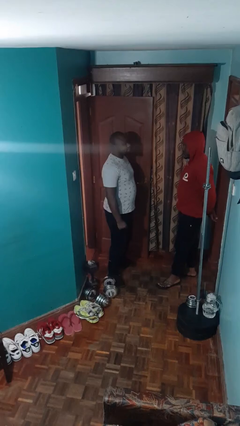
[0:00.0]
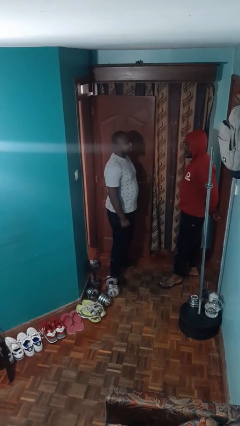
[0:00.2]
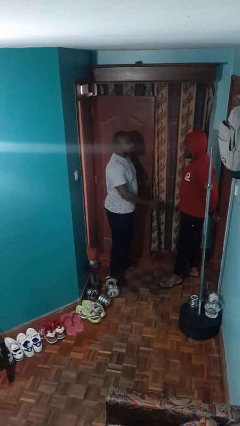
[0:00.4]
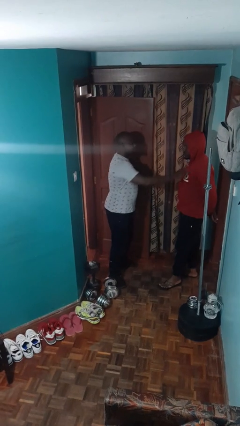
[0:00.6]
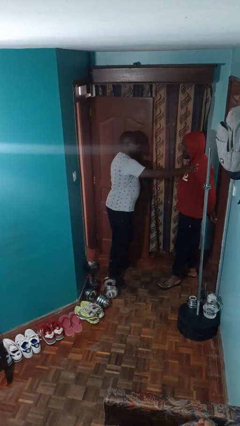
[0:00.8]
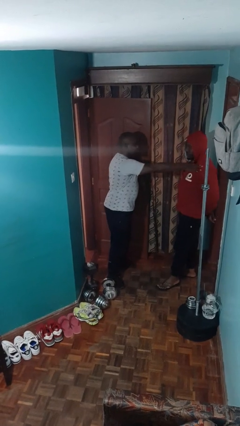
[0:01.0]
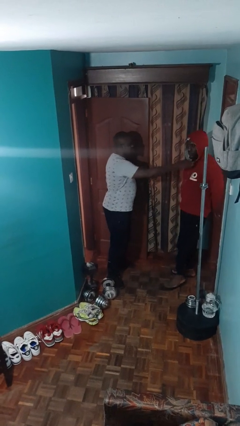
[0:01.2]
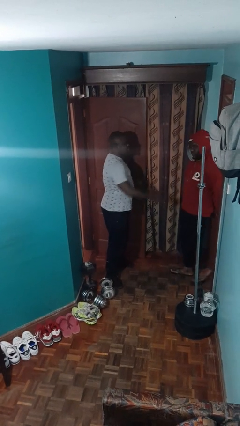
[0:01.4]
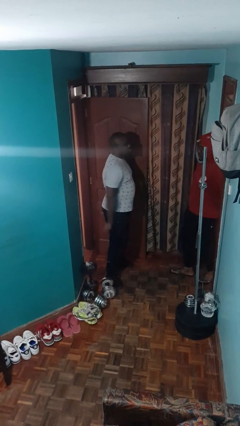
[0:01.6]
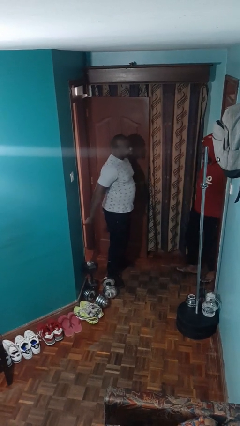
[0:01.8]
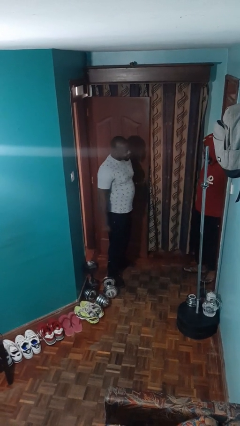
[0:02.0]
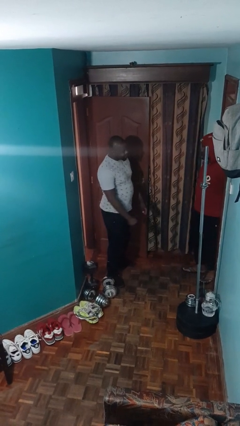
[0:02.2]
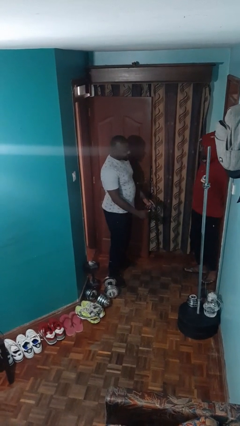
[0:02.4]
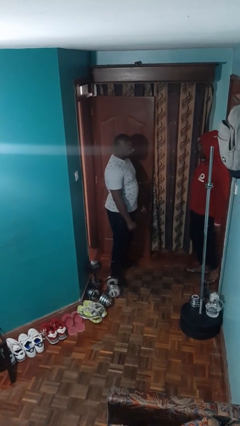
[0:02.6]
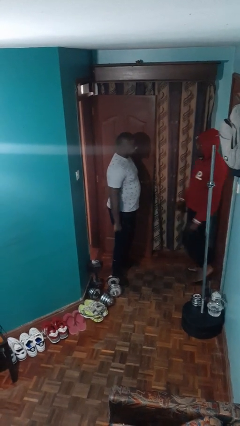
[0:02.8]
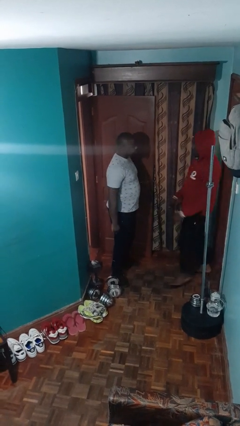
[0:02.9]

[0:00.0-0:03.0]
person shoves person

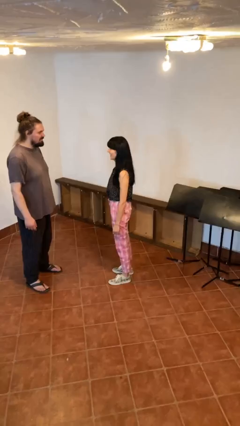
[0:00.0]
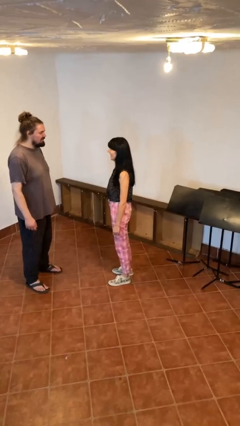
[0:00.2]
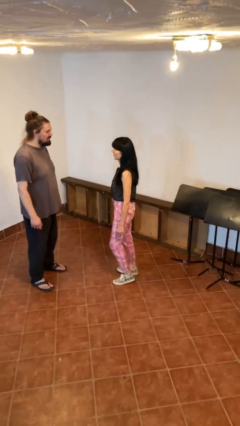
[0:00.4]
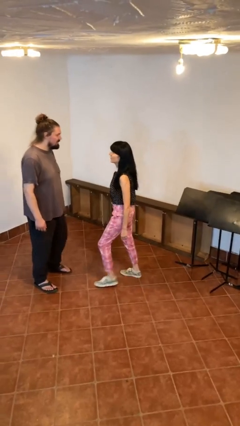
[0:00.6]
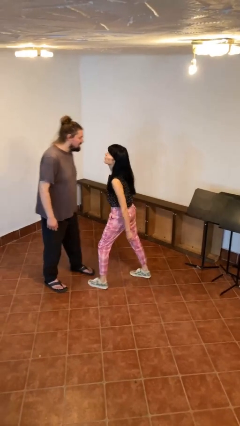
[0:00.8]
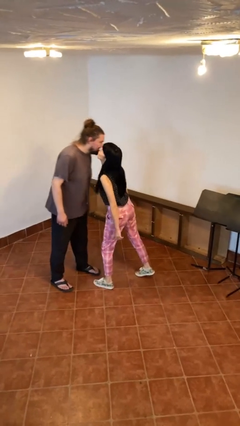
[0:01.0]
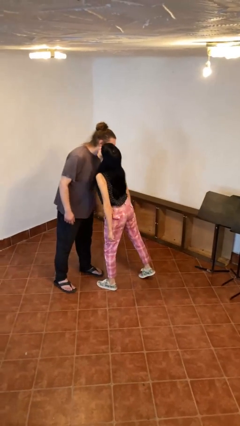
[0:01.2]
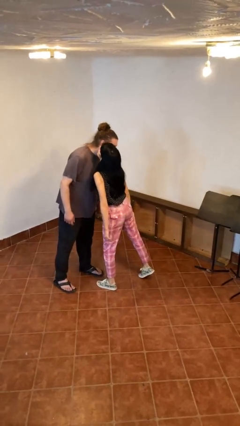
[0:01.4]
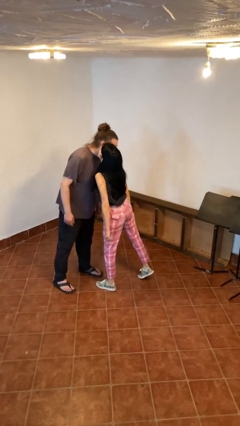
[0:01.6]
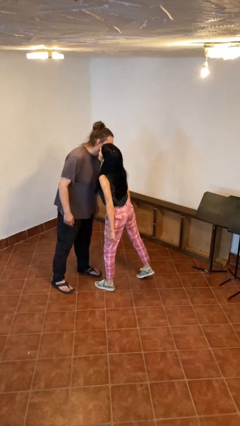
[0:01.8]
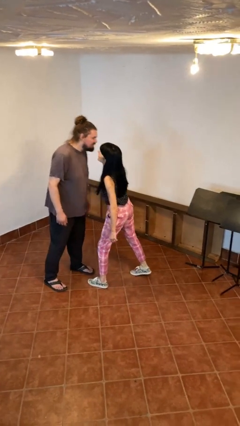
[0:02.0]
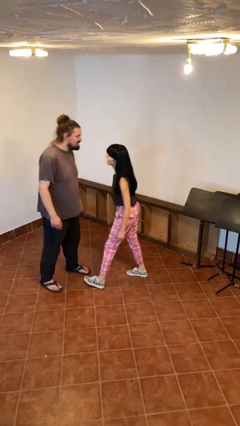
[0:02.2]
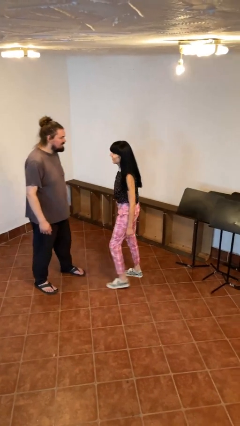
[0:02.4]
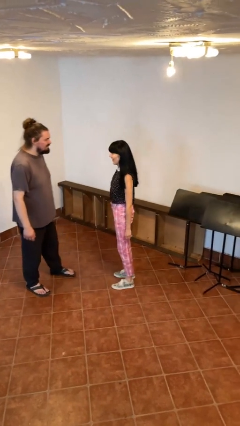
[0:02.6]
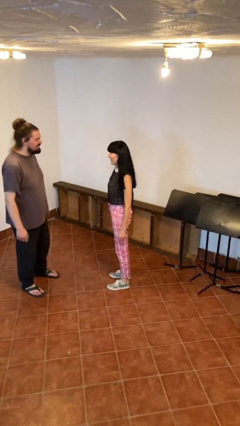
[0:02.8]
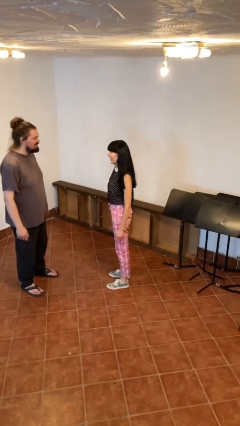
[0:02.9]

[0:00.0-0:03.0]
person kisses cheek of person

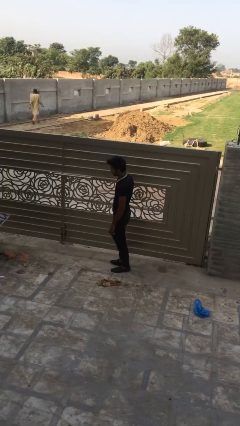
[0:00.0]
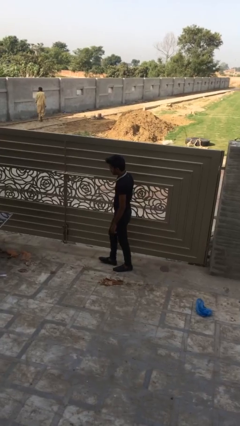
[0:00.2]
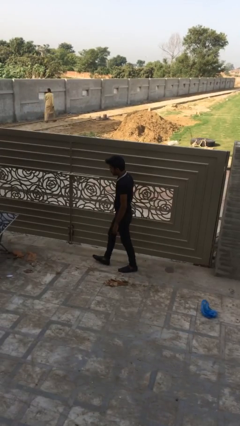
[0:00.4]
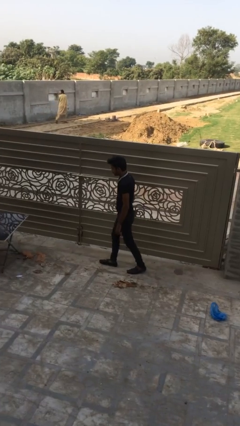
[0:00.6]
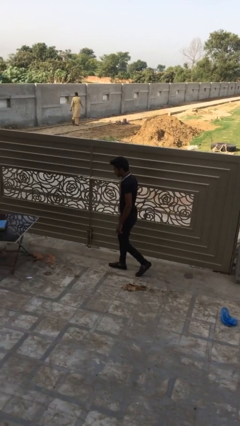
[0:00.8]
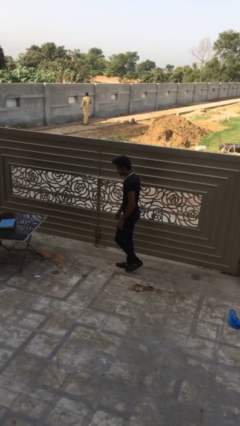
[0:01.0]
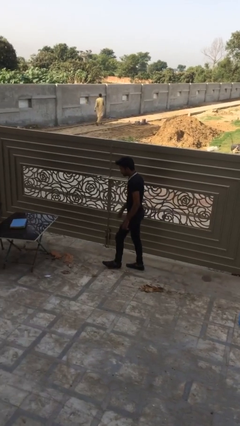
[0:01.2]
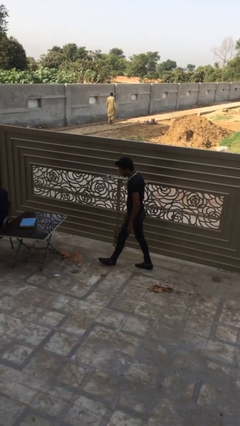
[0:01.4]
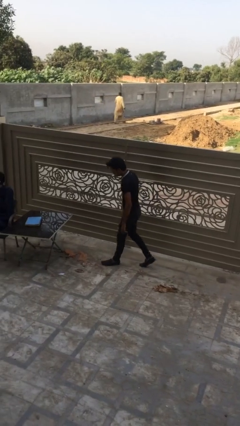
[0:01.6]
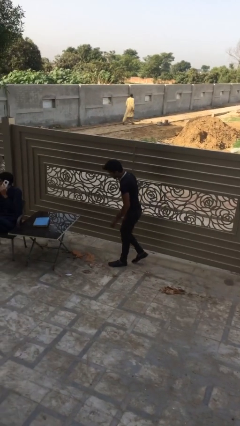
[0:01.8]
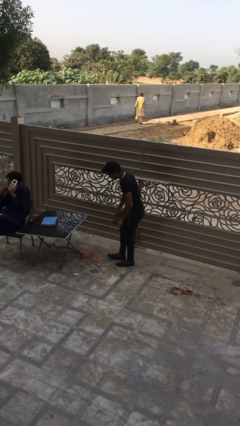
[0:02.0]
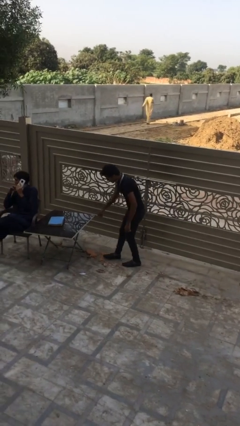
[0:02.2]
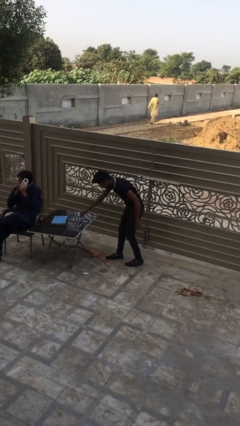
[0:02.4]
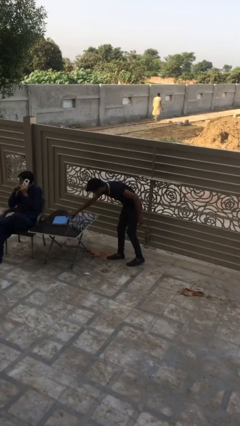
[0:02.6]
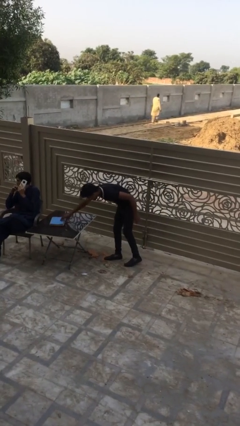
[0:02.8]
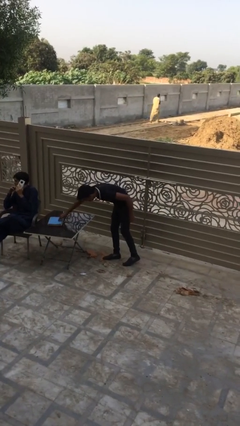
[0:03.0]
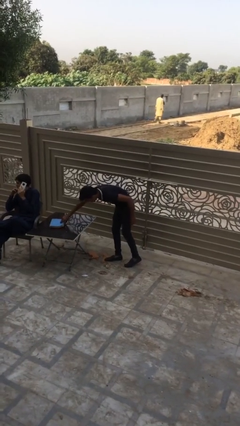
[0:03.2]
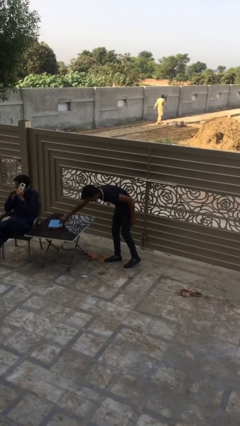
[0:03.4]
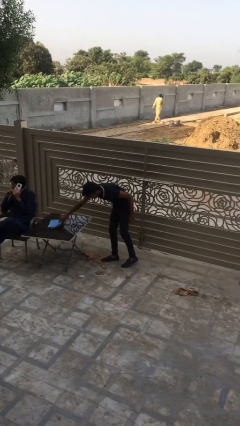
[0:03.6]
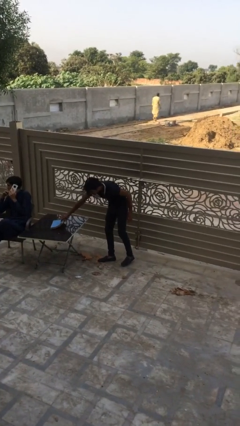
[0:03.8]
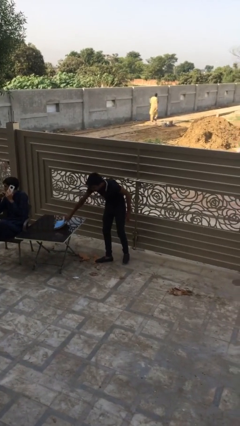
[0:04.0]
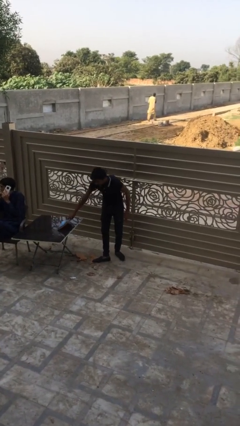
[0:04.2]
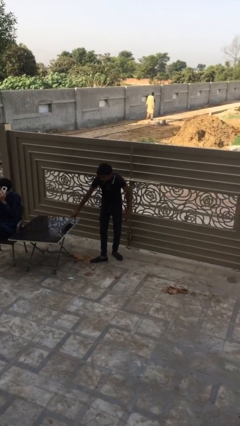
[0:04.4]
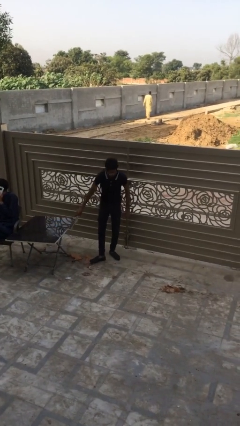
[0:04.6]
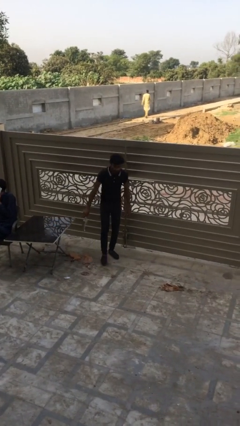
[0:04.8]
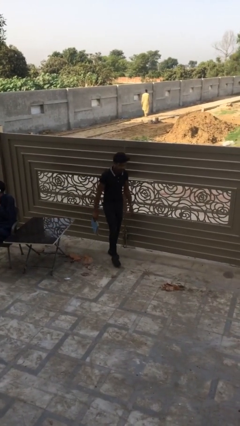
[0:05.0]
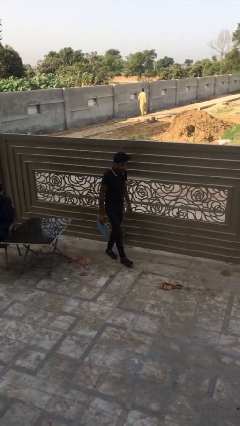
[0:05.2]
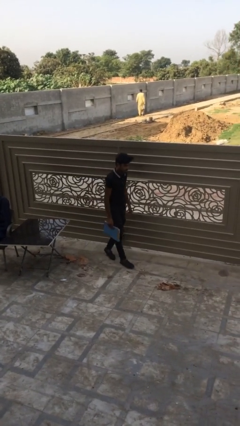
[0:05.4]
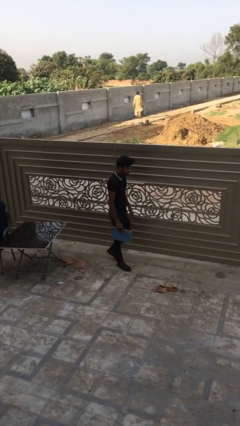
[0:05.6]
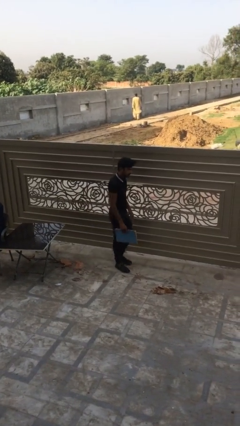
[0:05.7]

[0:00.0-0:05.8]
person steals object from person

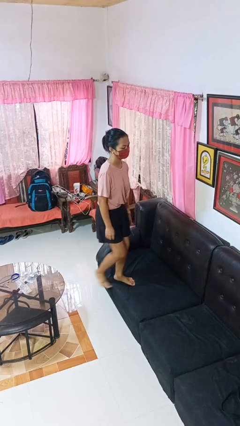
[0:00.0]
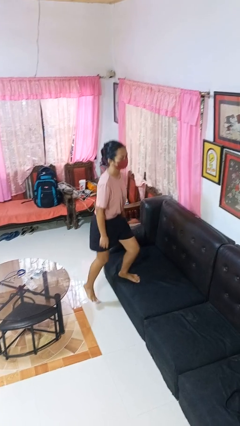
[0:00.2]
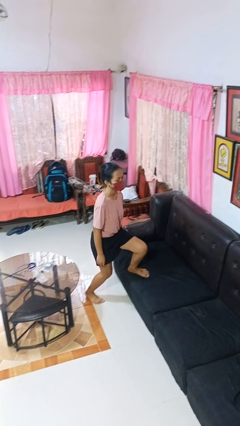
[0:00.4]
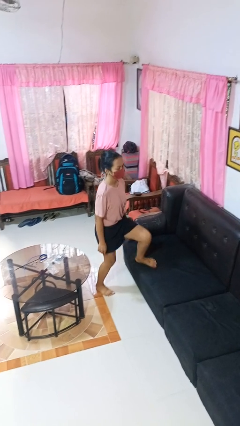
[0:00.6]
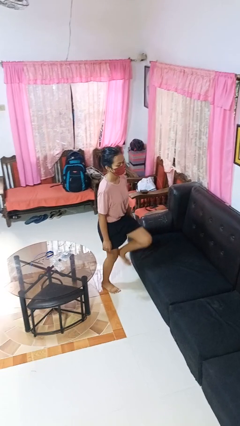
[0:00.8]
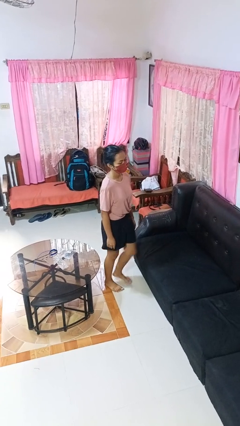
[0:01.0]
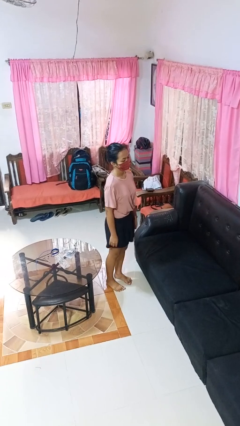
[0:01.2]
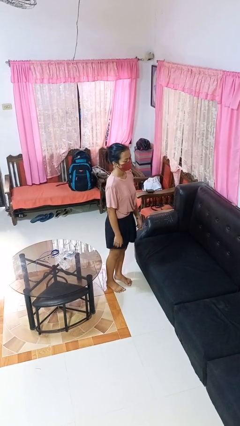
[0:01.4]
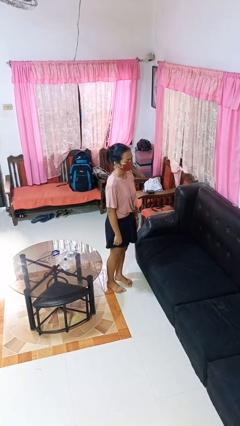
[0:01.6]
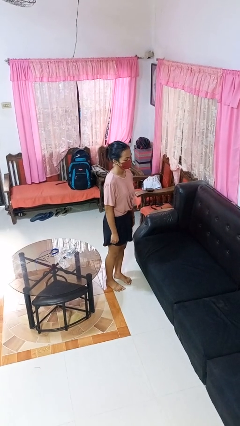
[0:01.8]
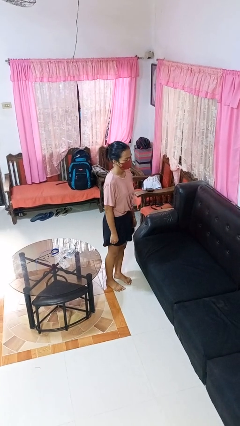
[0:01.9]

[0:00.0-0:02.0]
person climbs off couch

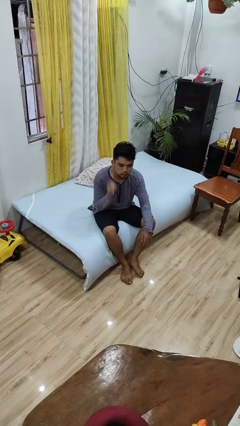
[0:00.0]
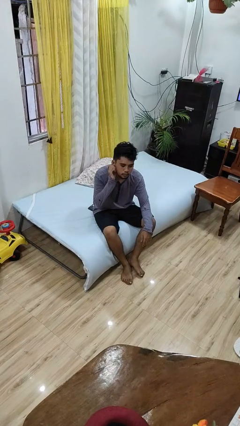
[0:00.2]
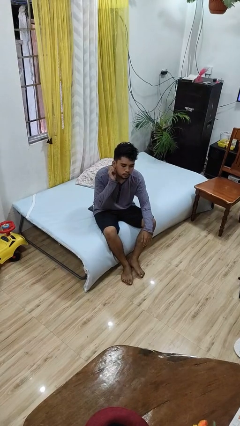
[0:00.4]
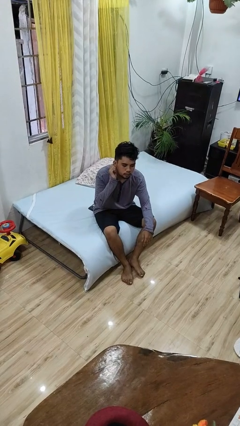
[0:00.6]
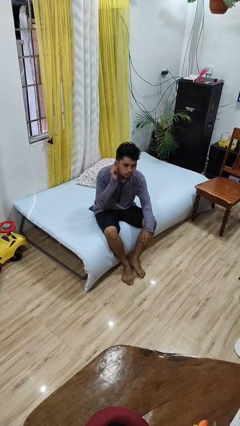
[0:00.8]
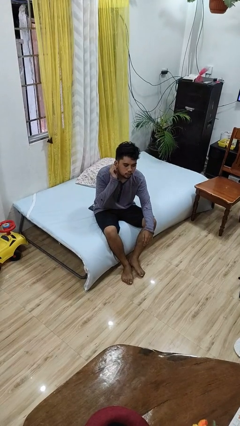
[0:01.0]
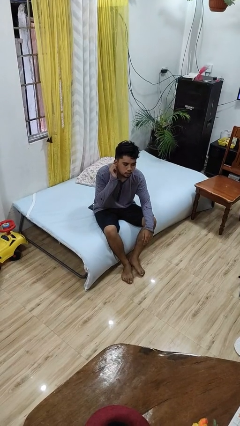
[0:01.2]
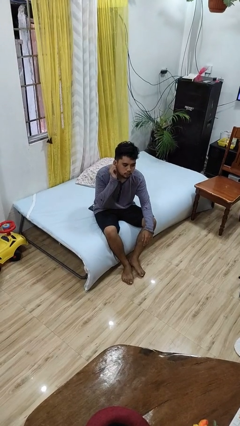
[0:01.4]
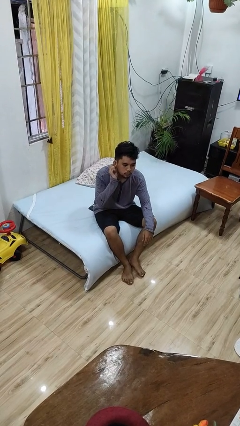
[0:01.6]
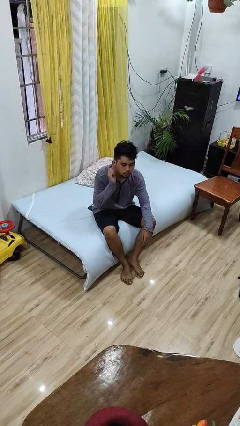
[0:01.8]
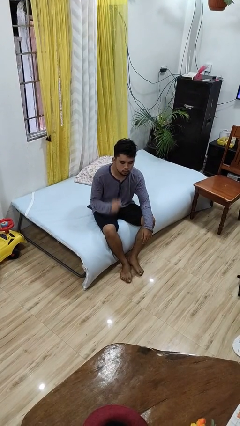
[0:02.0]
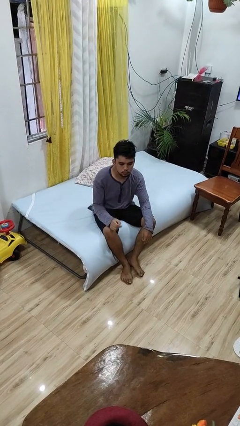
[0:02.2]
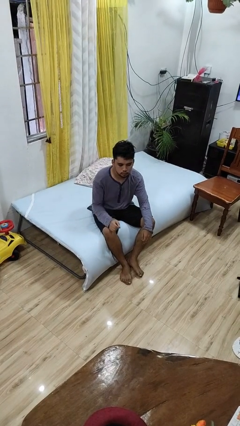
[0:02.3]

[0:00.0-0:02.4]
person touches earlobe

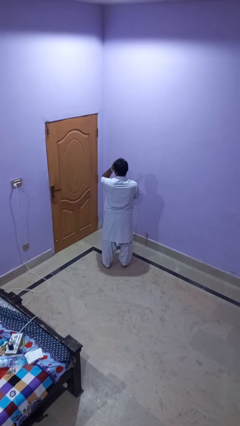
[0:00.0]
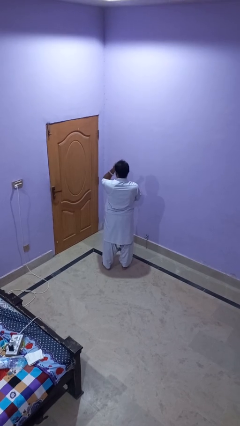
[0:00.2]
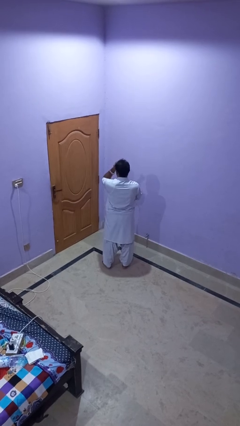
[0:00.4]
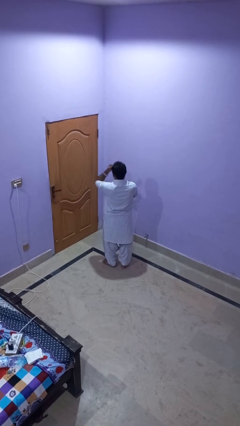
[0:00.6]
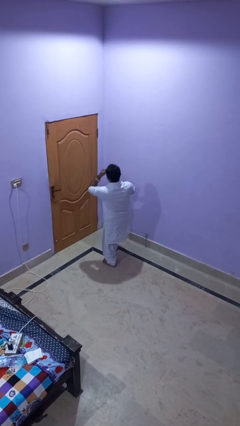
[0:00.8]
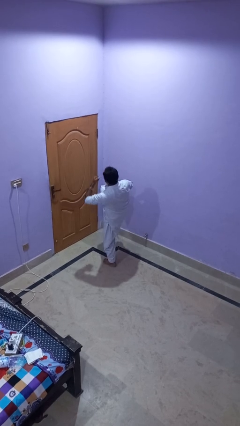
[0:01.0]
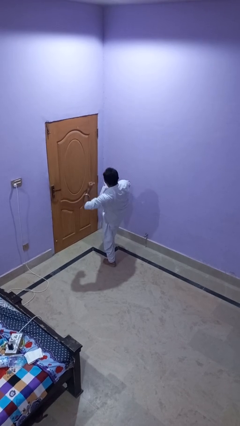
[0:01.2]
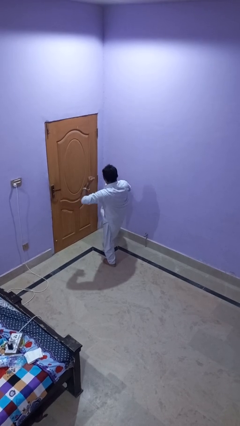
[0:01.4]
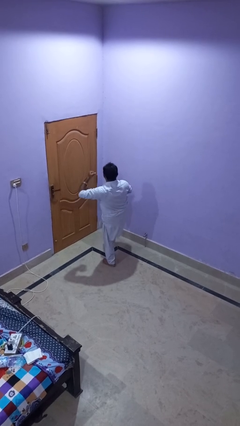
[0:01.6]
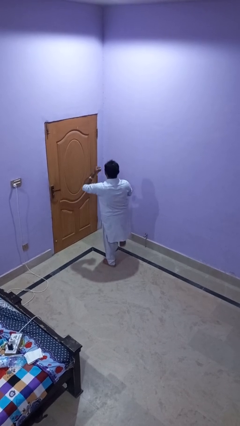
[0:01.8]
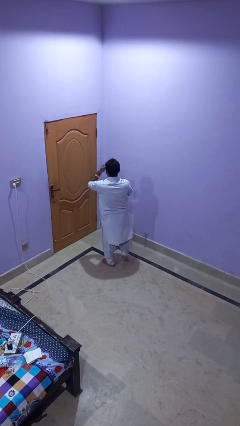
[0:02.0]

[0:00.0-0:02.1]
person karate kicks
